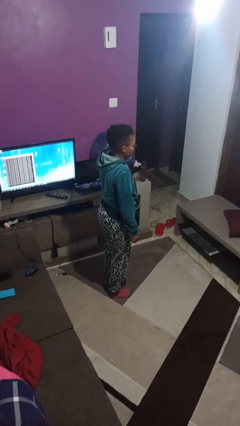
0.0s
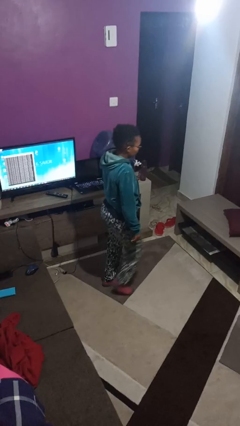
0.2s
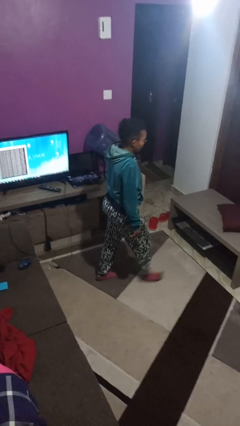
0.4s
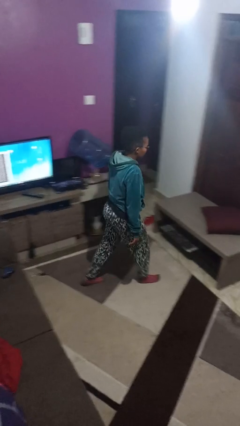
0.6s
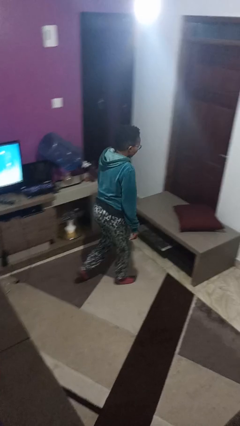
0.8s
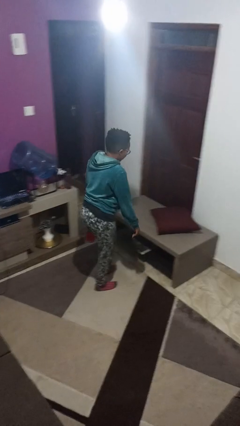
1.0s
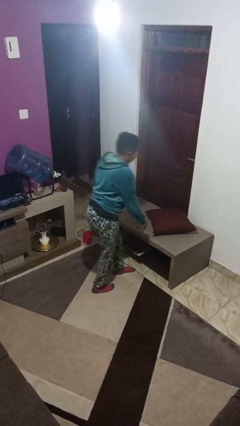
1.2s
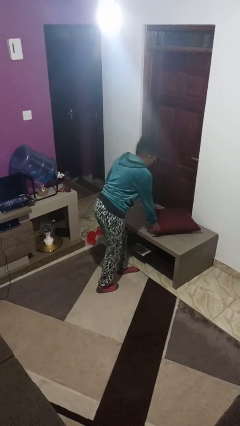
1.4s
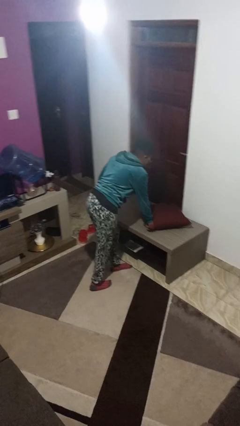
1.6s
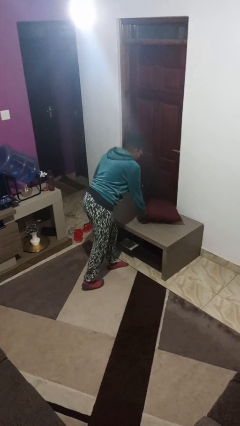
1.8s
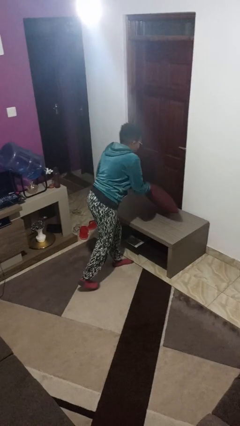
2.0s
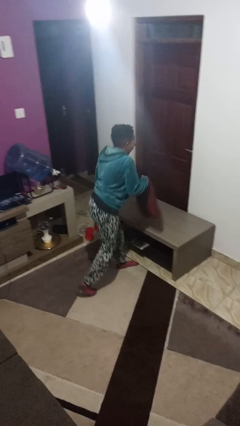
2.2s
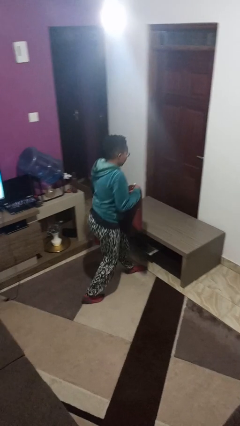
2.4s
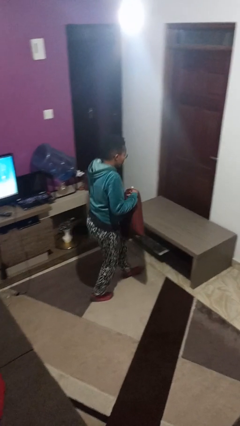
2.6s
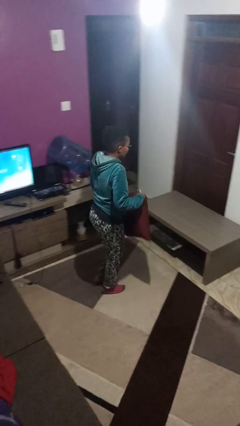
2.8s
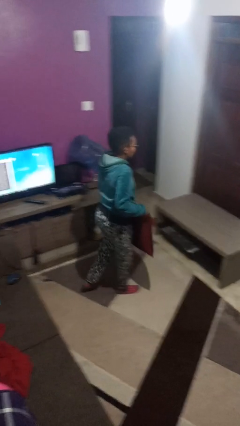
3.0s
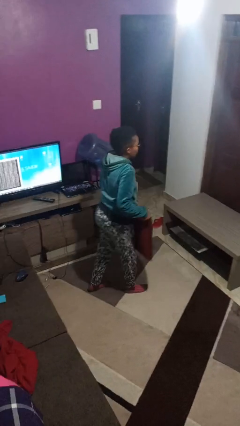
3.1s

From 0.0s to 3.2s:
person picks up object from table

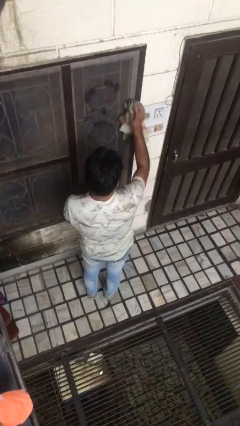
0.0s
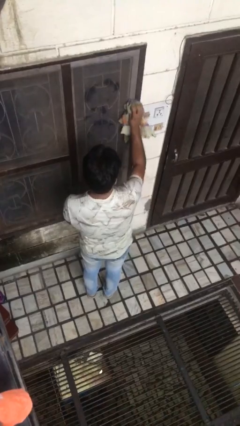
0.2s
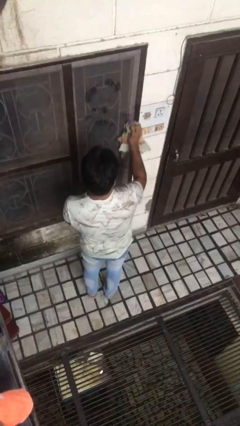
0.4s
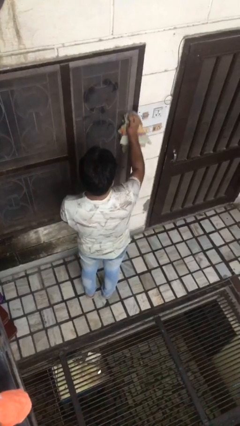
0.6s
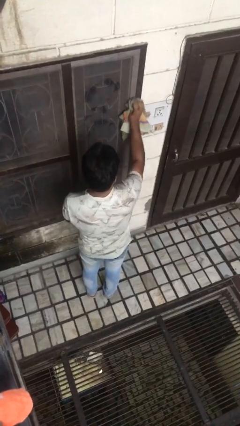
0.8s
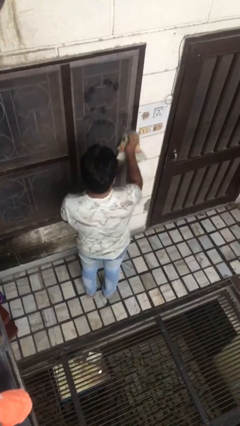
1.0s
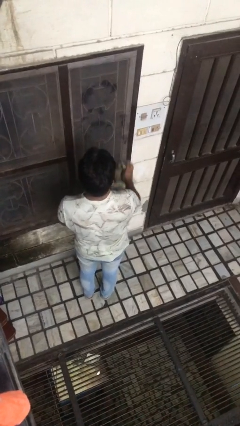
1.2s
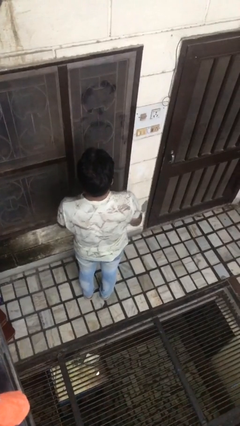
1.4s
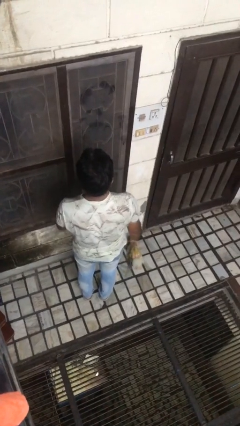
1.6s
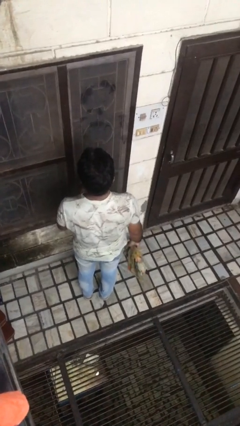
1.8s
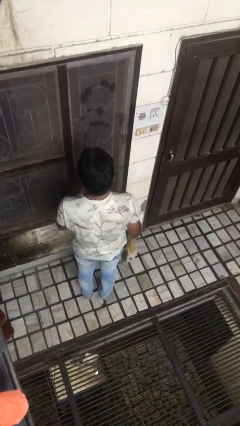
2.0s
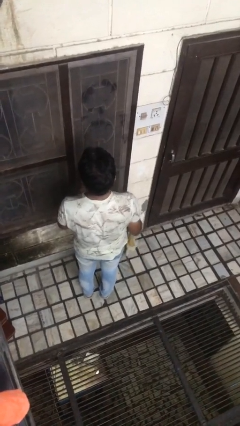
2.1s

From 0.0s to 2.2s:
person washes window

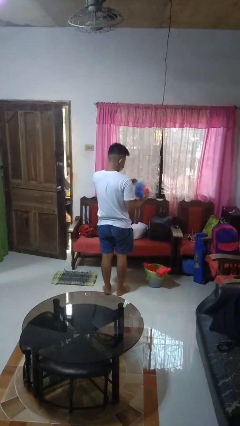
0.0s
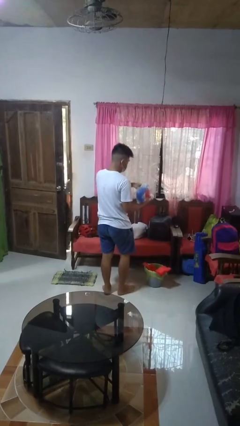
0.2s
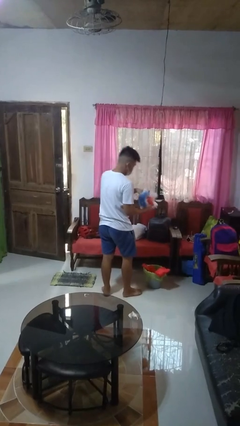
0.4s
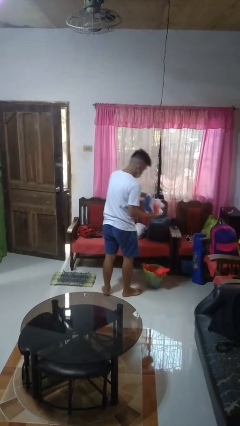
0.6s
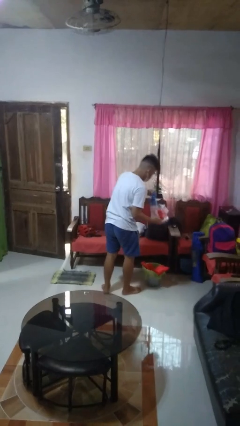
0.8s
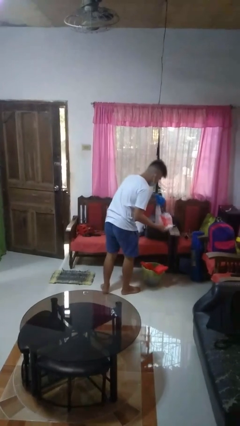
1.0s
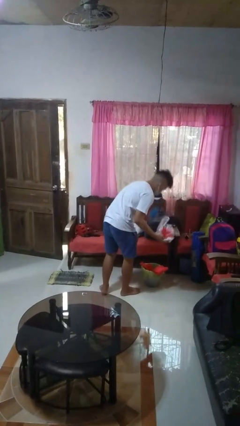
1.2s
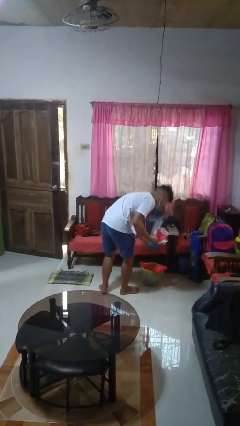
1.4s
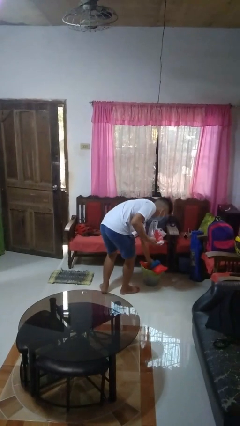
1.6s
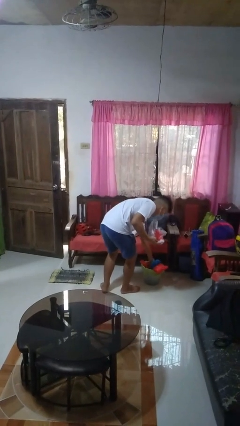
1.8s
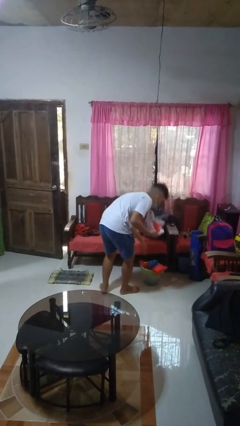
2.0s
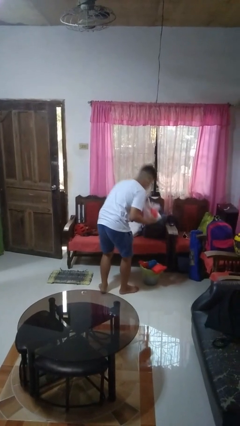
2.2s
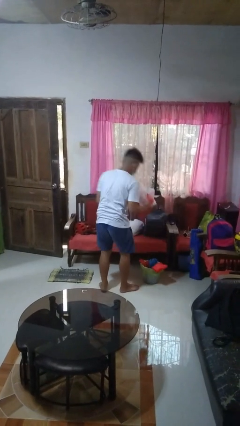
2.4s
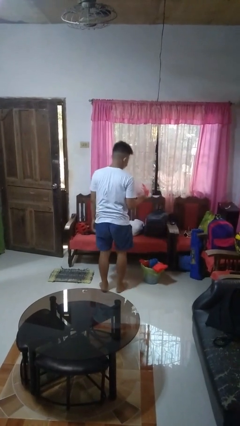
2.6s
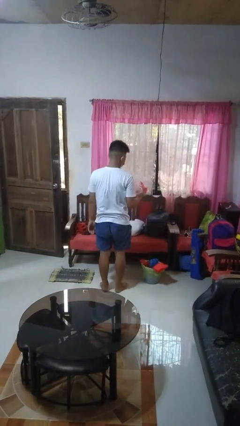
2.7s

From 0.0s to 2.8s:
person discards trash

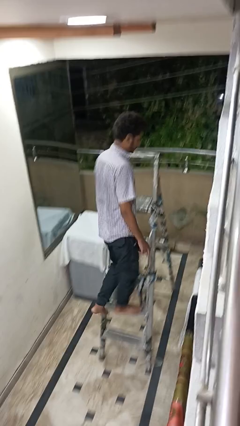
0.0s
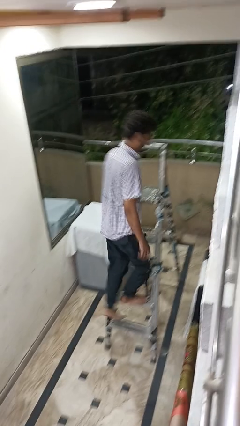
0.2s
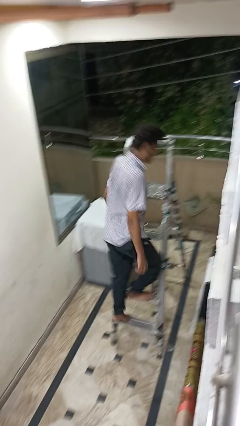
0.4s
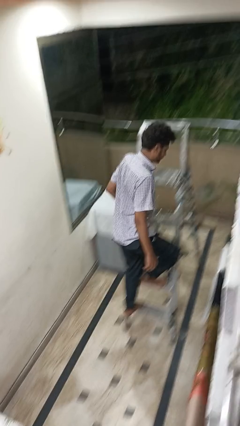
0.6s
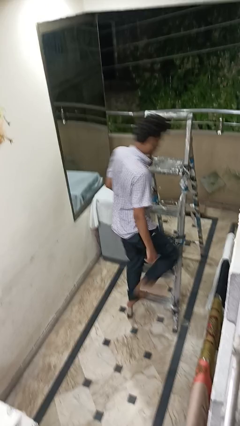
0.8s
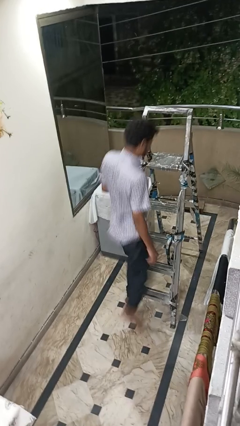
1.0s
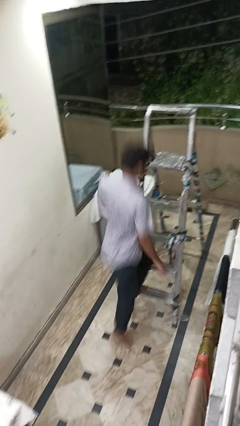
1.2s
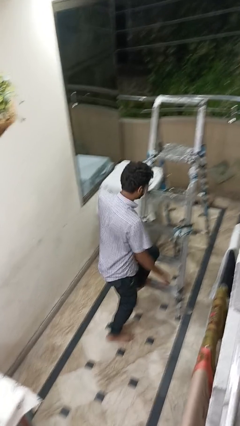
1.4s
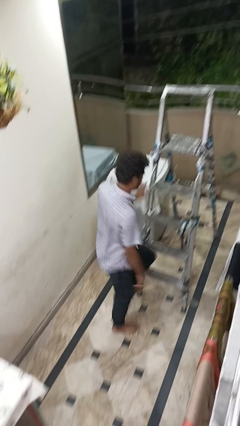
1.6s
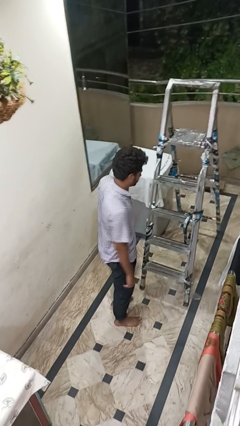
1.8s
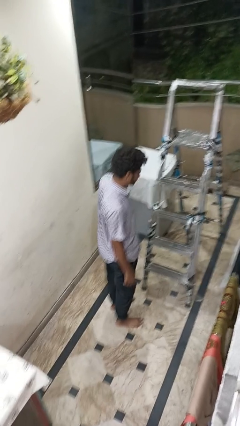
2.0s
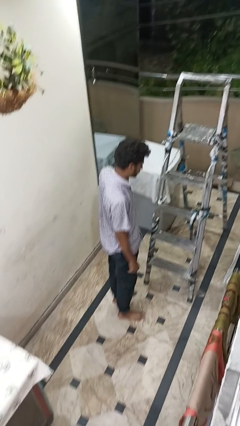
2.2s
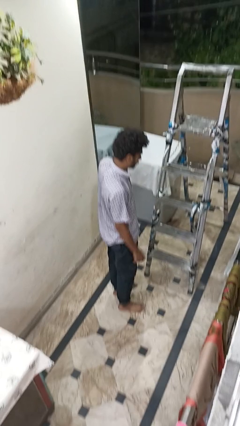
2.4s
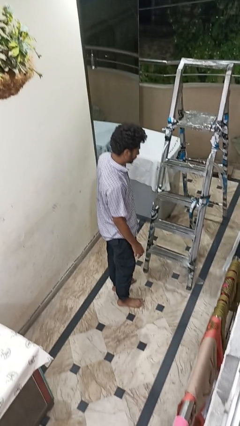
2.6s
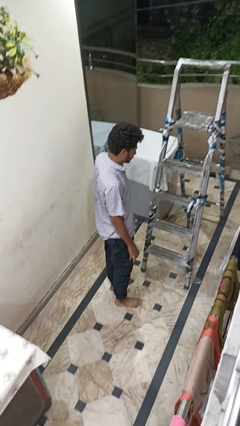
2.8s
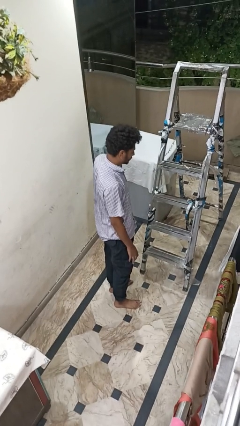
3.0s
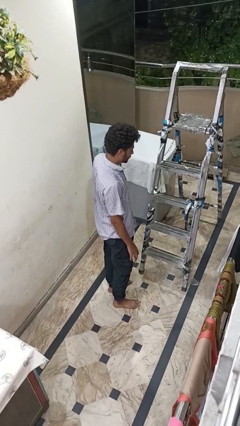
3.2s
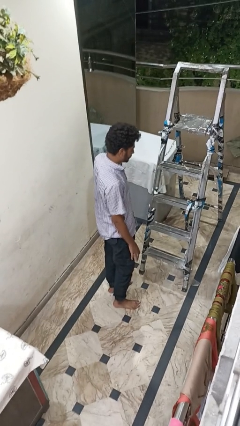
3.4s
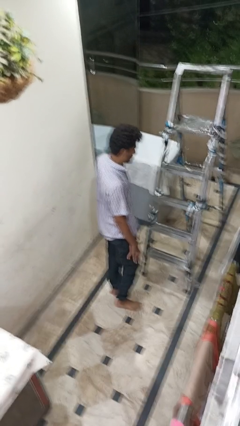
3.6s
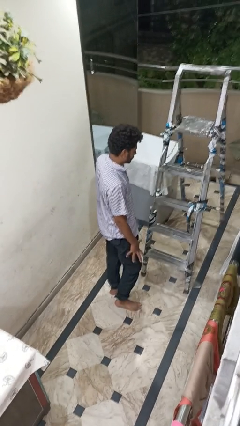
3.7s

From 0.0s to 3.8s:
person climbs down ladder

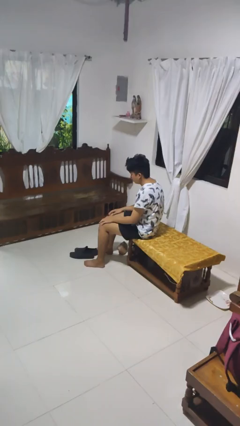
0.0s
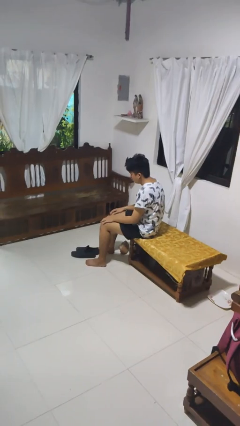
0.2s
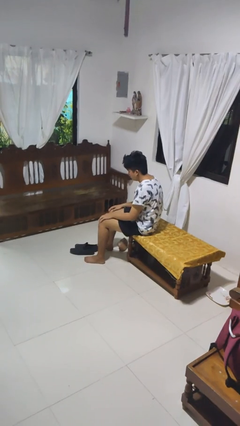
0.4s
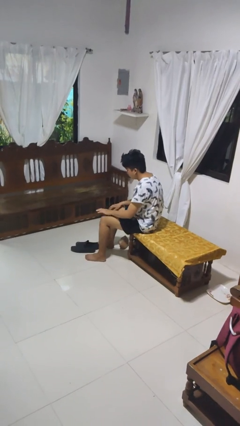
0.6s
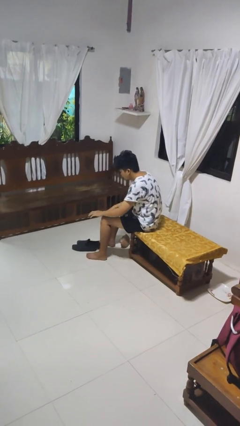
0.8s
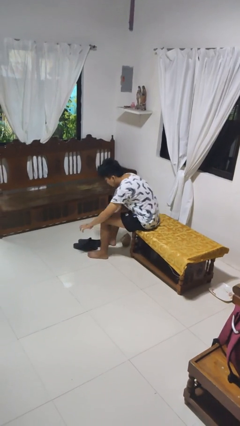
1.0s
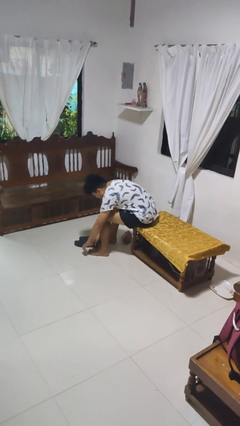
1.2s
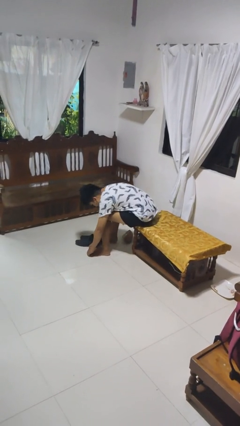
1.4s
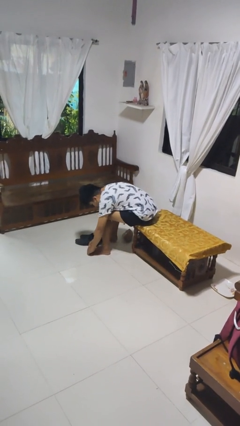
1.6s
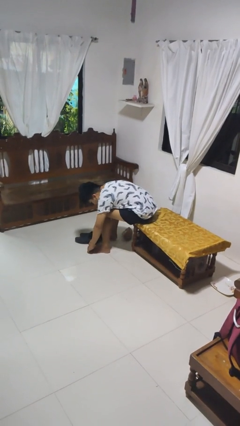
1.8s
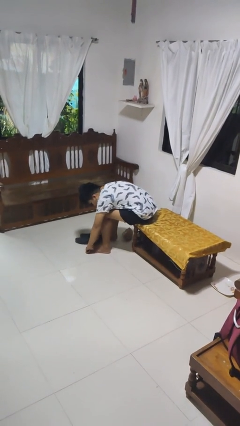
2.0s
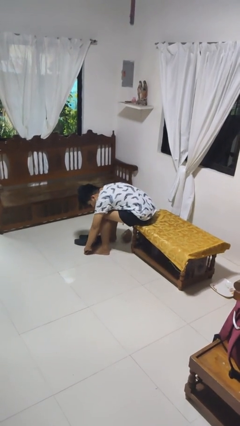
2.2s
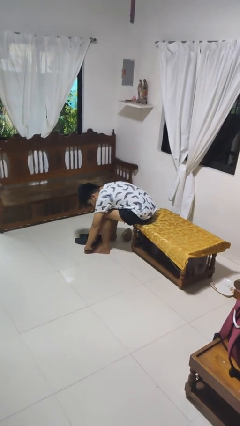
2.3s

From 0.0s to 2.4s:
person rubs foot

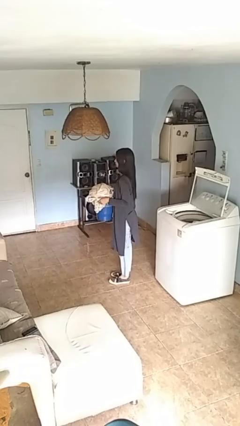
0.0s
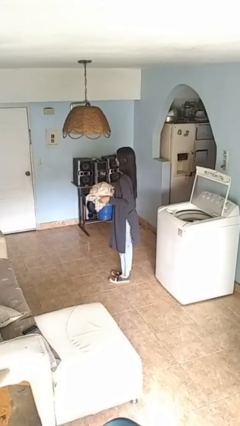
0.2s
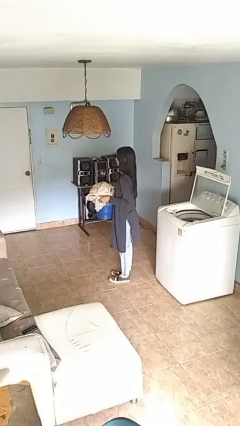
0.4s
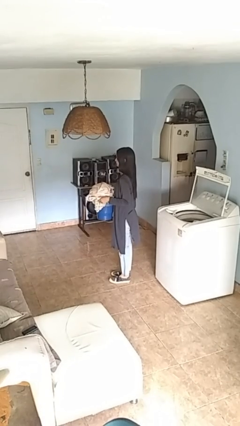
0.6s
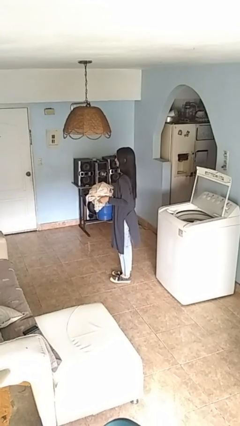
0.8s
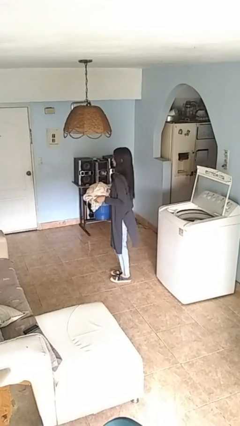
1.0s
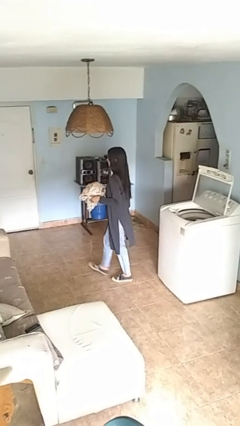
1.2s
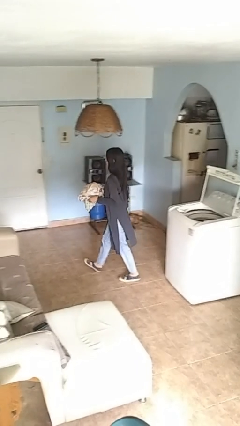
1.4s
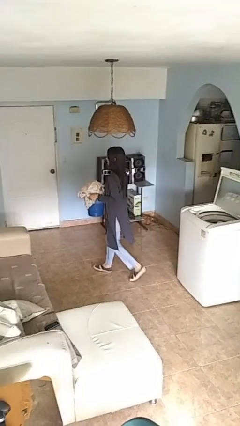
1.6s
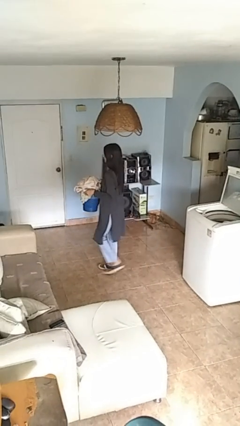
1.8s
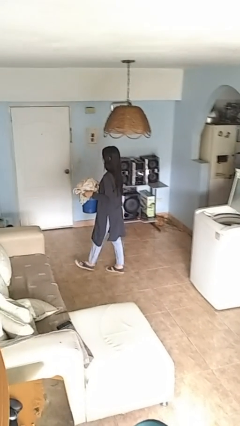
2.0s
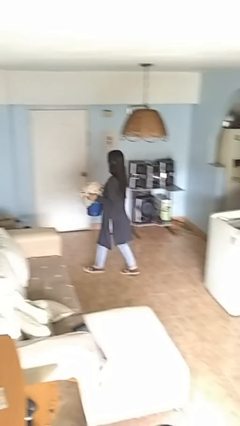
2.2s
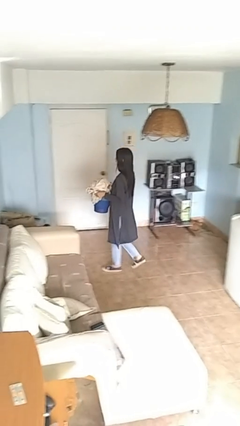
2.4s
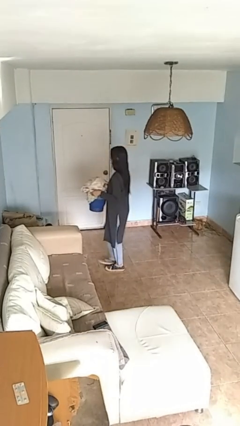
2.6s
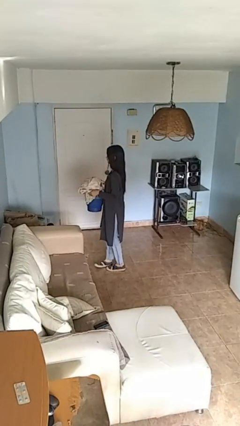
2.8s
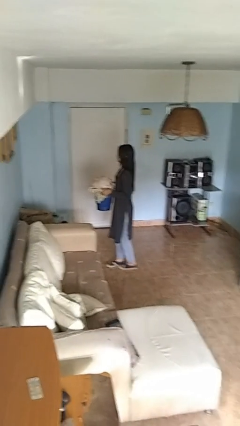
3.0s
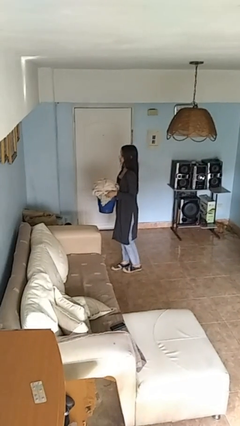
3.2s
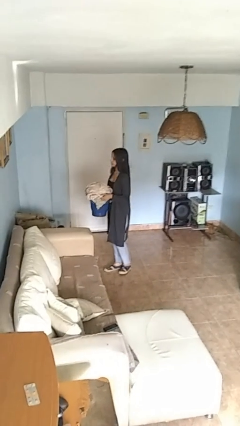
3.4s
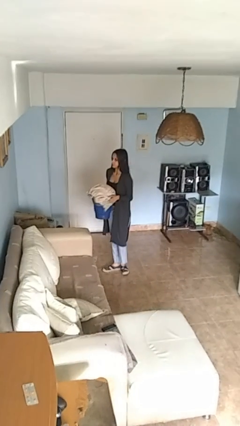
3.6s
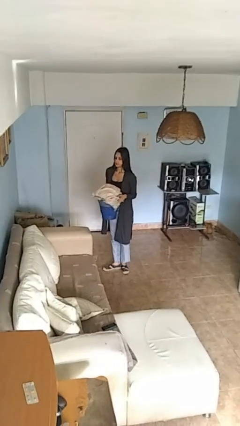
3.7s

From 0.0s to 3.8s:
person carries laundry basket
